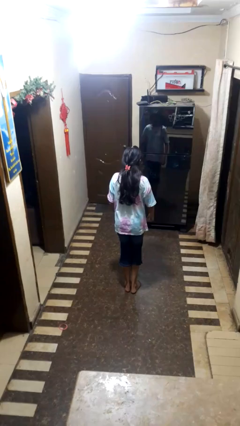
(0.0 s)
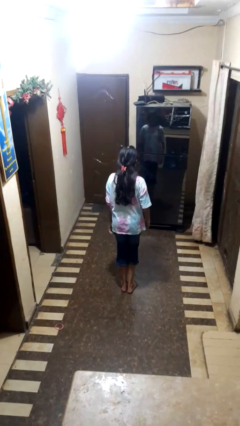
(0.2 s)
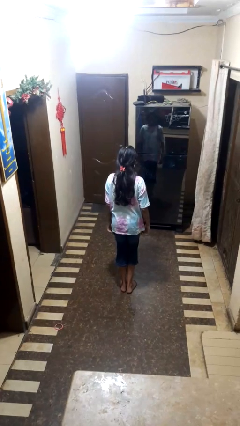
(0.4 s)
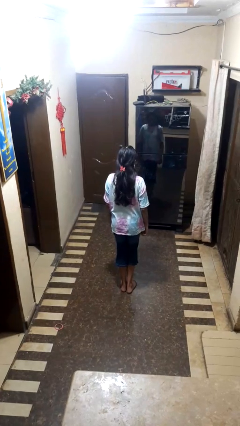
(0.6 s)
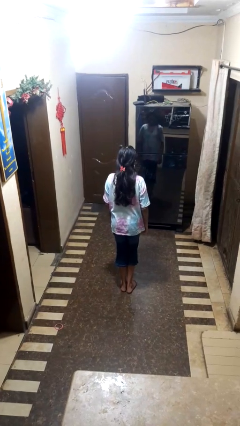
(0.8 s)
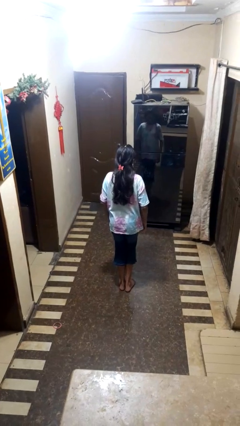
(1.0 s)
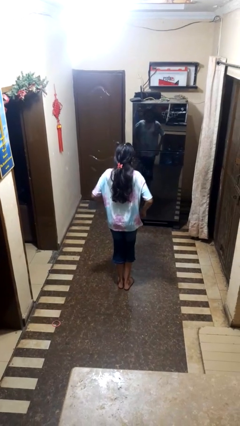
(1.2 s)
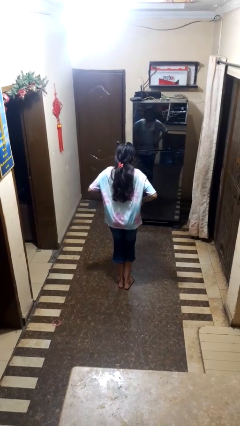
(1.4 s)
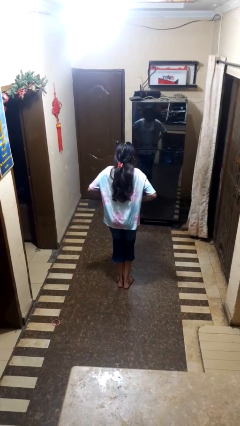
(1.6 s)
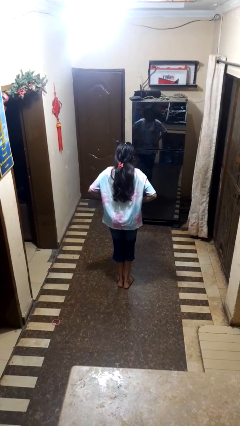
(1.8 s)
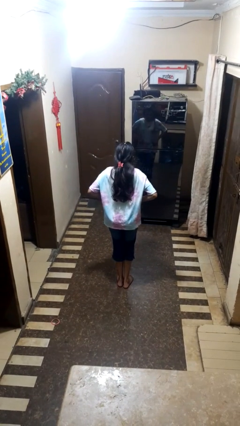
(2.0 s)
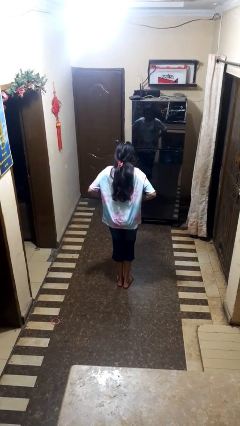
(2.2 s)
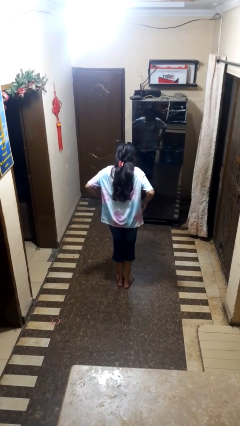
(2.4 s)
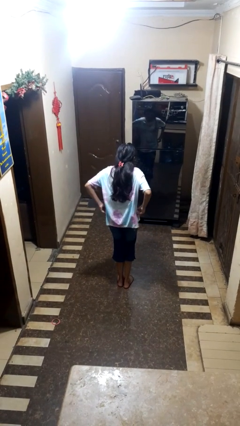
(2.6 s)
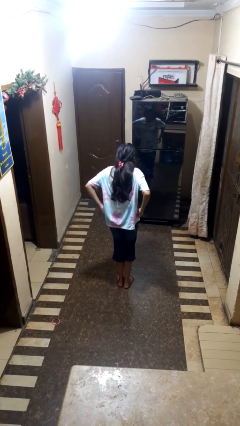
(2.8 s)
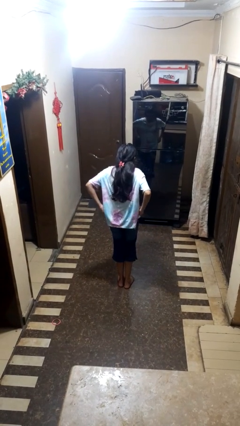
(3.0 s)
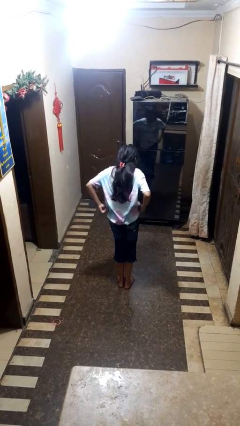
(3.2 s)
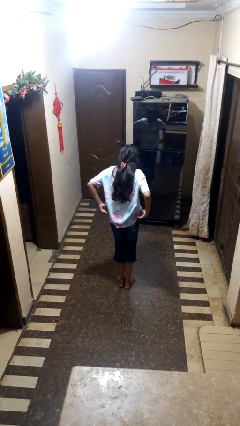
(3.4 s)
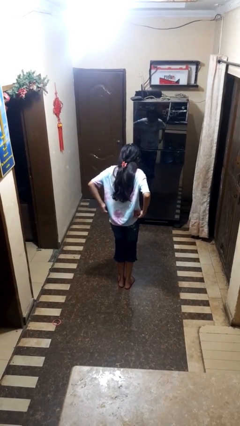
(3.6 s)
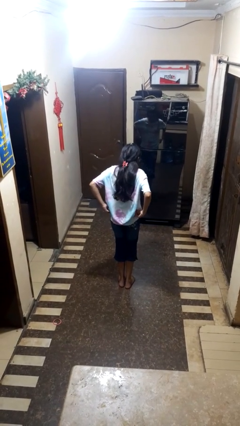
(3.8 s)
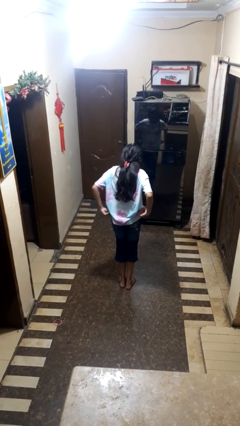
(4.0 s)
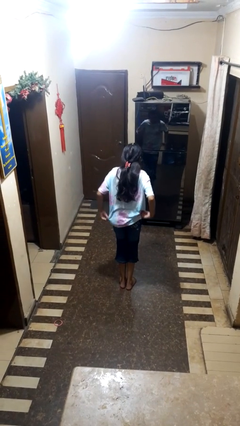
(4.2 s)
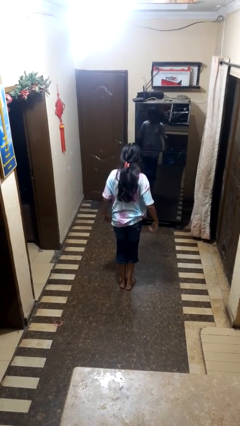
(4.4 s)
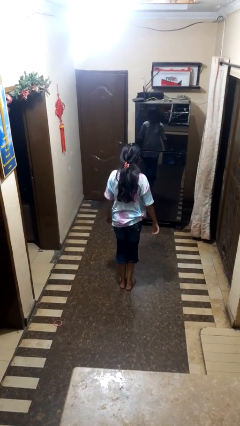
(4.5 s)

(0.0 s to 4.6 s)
person hikes up pants

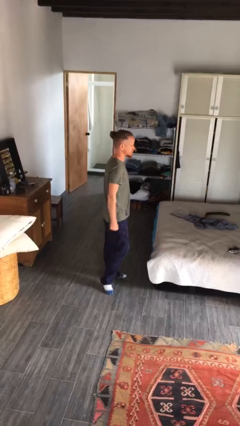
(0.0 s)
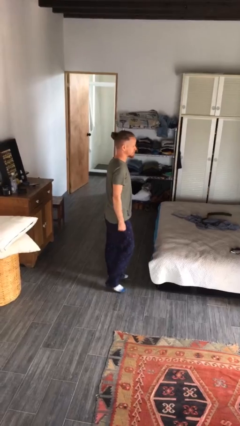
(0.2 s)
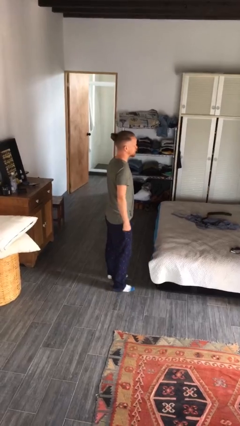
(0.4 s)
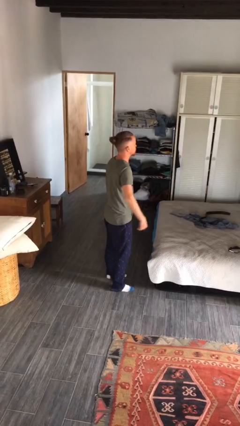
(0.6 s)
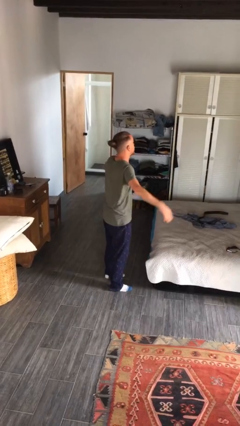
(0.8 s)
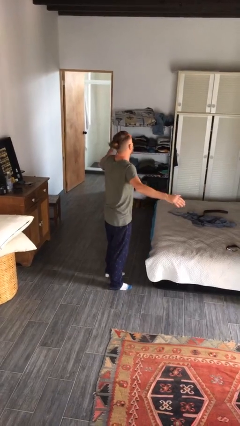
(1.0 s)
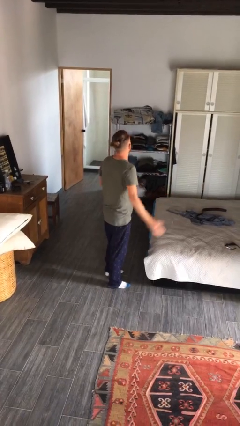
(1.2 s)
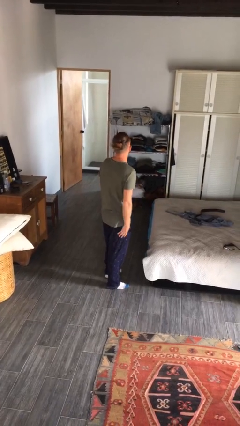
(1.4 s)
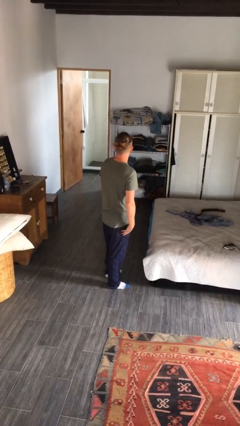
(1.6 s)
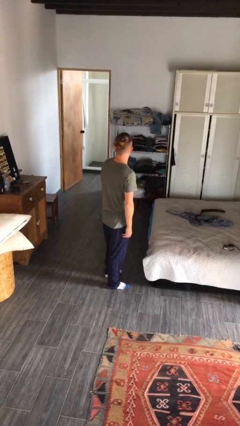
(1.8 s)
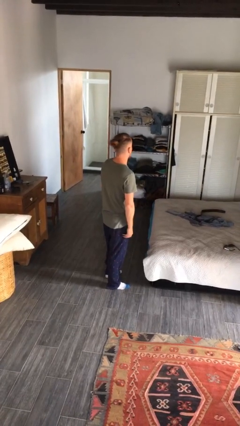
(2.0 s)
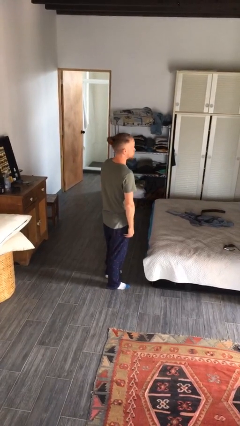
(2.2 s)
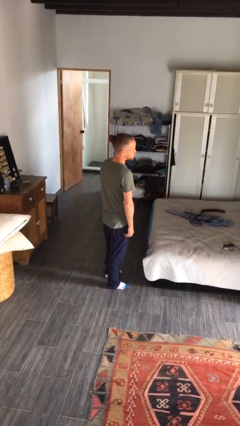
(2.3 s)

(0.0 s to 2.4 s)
person slaps hands on thighs

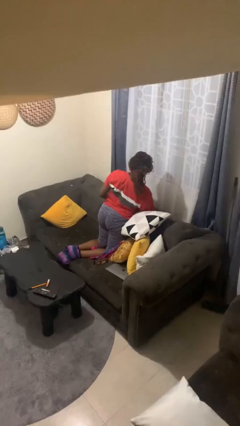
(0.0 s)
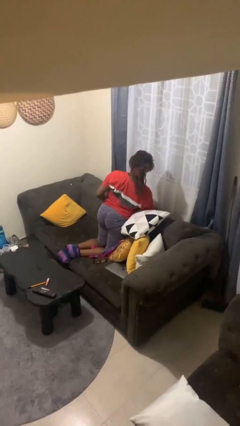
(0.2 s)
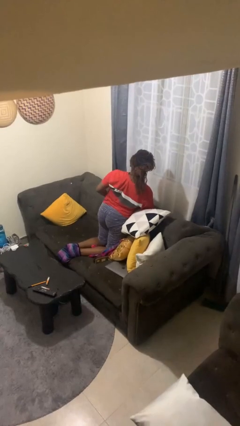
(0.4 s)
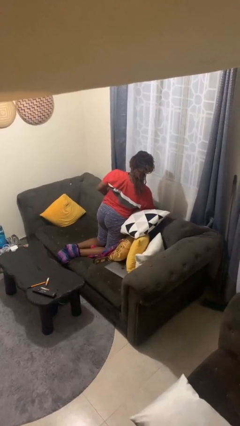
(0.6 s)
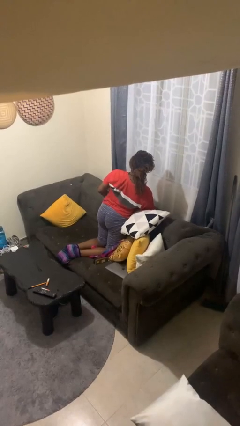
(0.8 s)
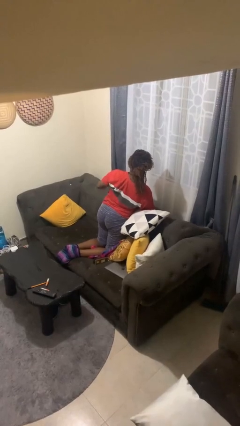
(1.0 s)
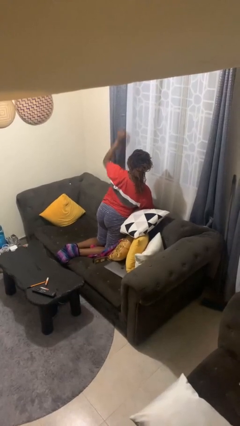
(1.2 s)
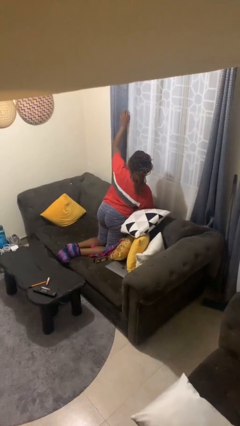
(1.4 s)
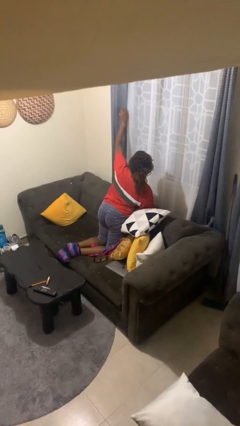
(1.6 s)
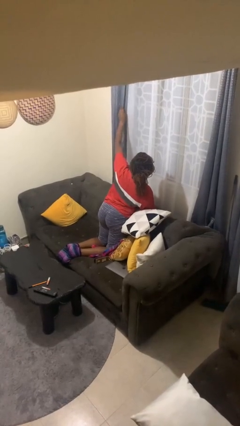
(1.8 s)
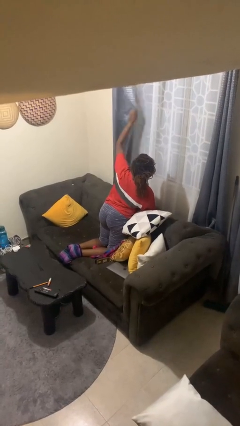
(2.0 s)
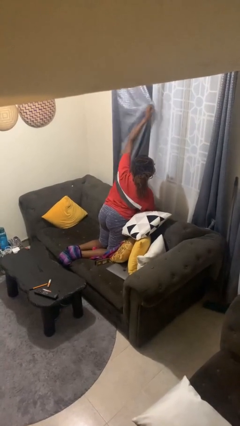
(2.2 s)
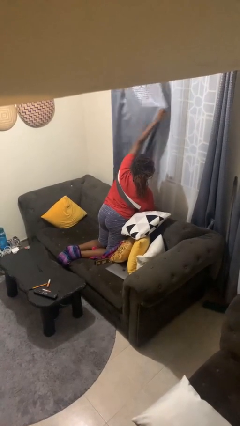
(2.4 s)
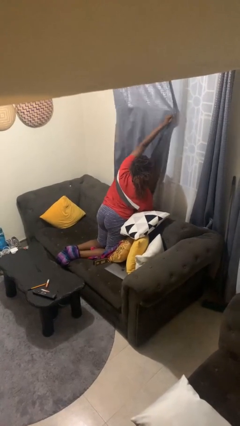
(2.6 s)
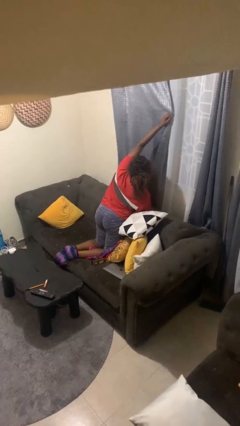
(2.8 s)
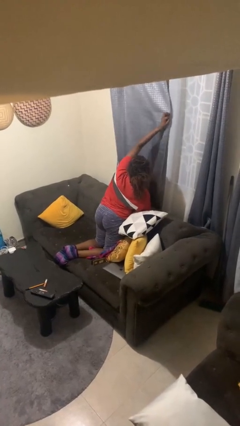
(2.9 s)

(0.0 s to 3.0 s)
person closes curtains

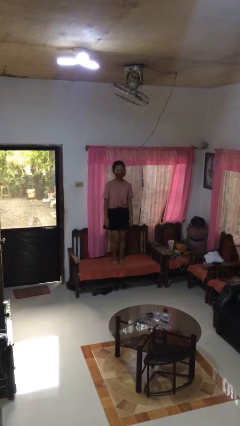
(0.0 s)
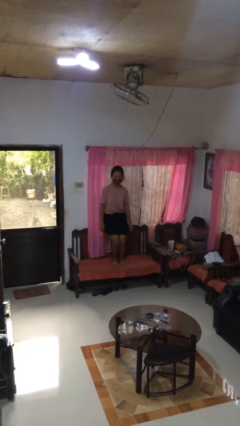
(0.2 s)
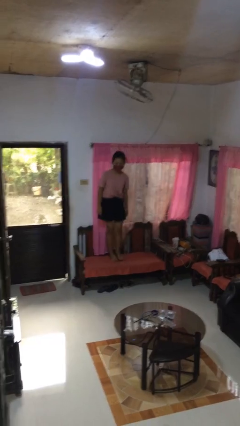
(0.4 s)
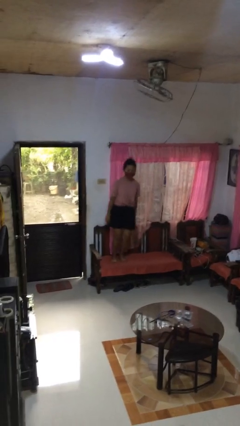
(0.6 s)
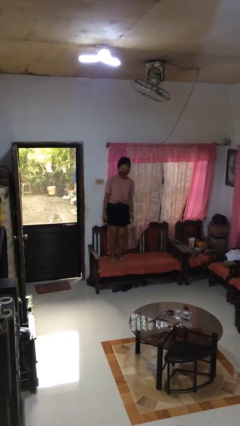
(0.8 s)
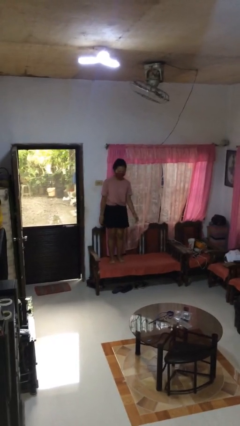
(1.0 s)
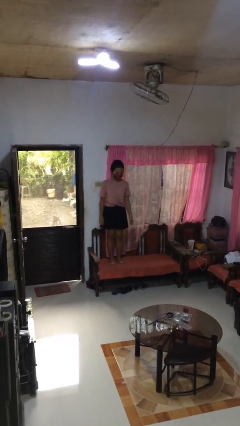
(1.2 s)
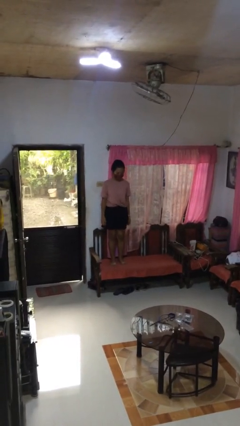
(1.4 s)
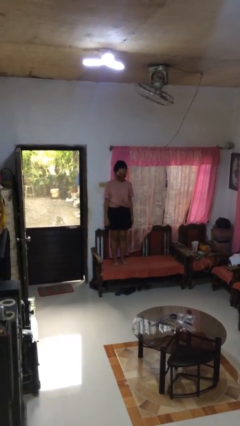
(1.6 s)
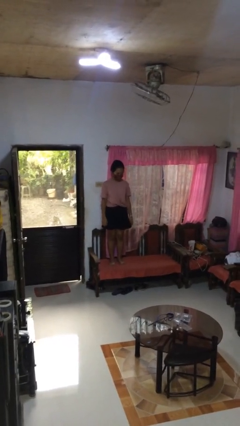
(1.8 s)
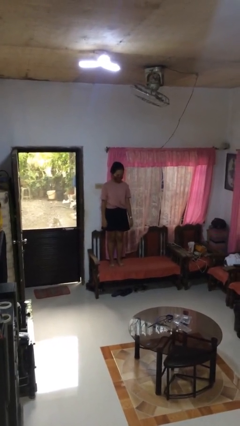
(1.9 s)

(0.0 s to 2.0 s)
person jumps on couch

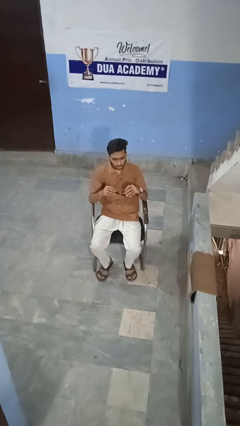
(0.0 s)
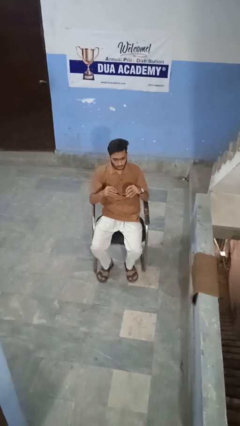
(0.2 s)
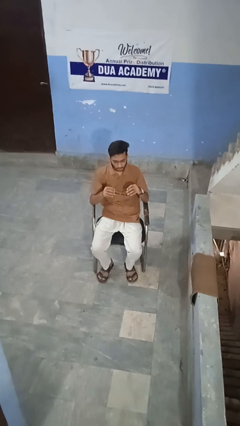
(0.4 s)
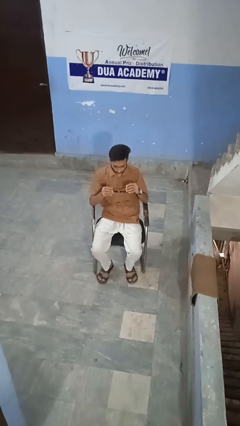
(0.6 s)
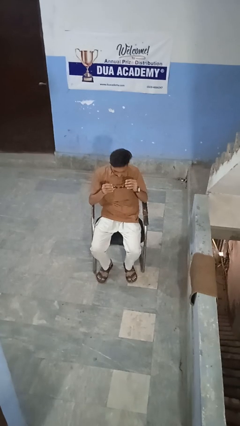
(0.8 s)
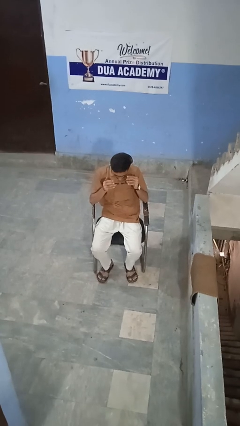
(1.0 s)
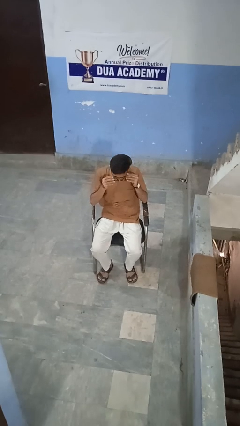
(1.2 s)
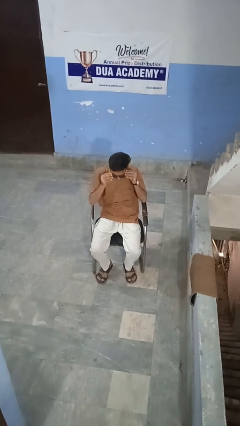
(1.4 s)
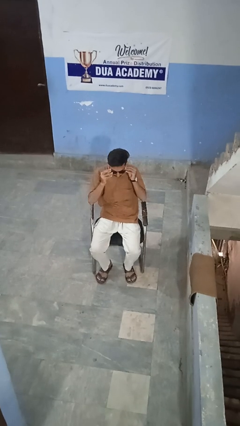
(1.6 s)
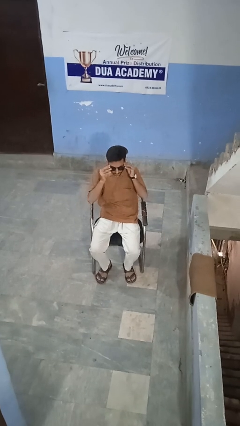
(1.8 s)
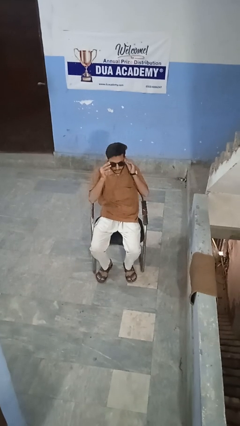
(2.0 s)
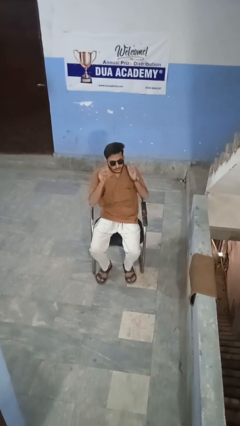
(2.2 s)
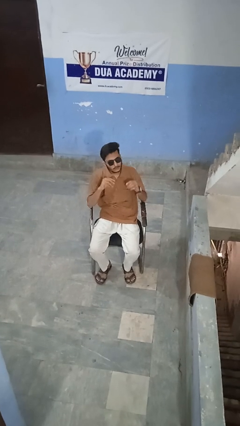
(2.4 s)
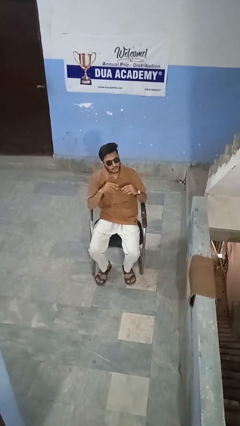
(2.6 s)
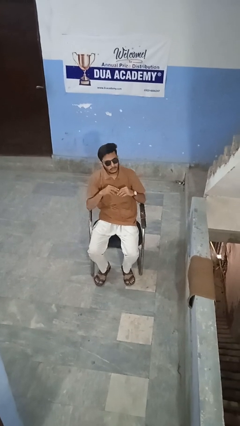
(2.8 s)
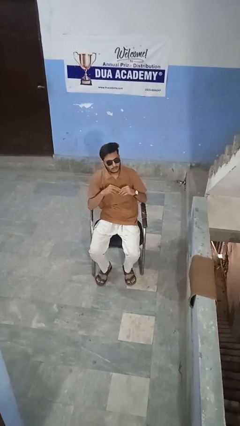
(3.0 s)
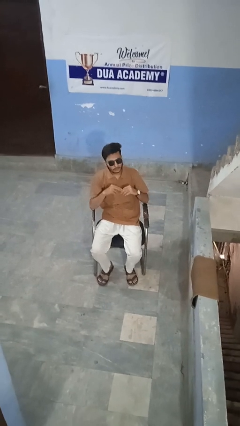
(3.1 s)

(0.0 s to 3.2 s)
person puts on sunglasses

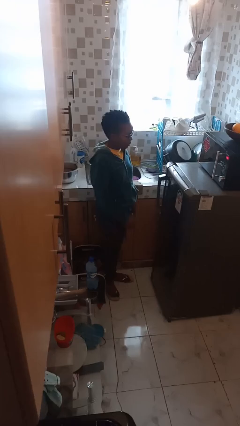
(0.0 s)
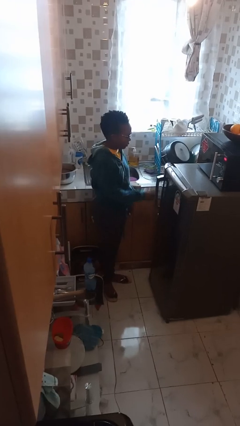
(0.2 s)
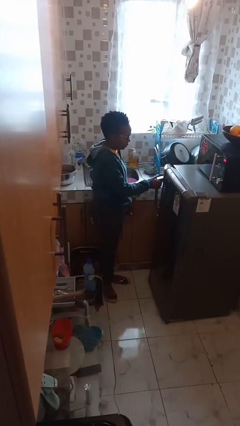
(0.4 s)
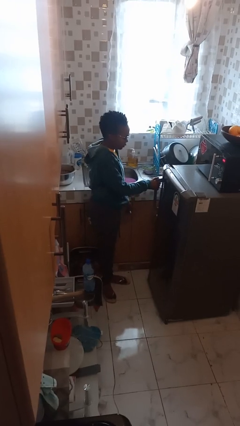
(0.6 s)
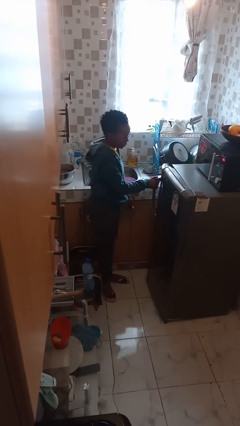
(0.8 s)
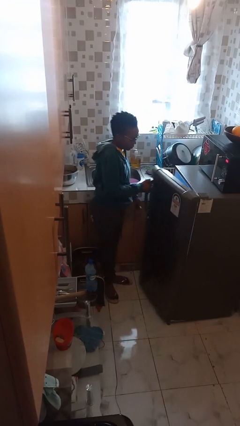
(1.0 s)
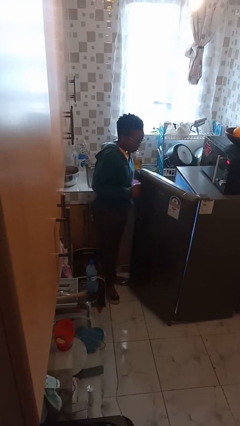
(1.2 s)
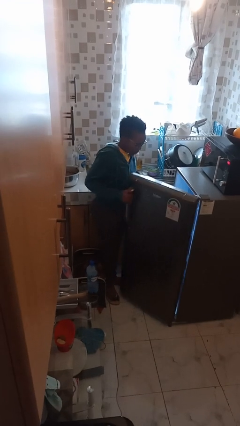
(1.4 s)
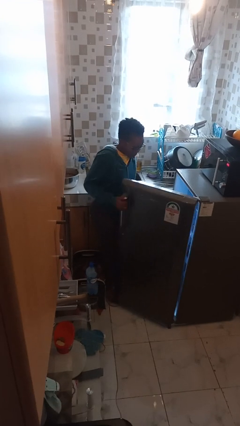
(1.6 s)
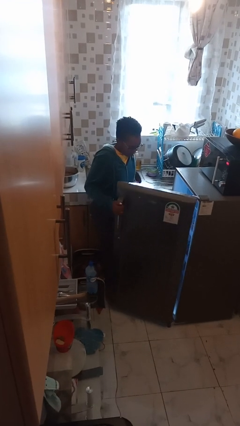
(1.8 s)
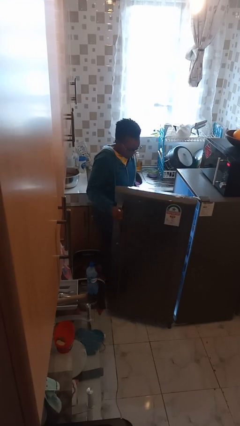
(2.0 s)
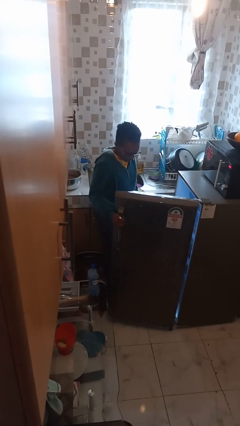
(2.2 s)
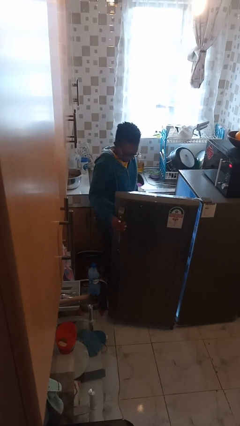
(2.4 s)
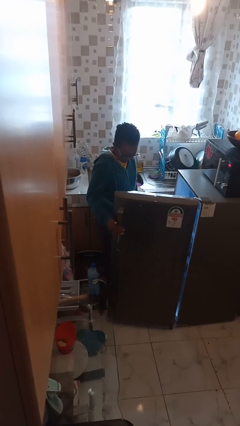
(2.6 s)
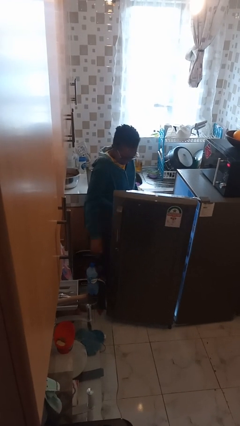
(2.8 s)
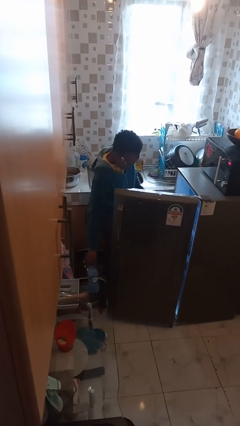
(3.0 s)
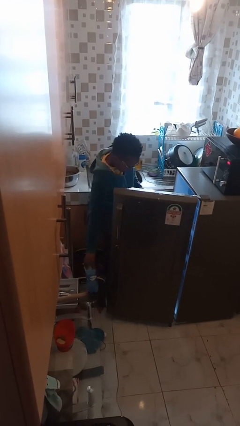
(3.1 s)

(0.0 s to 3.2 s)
person opens refrigerator
